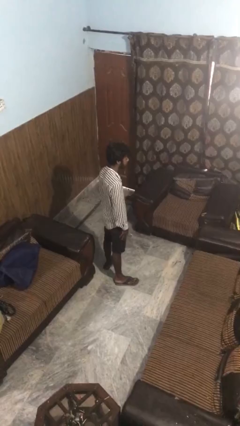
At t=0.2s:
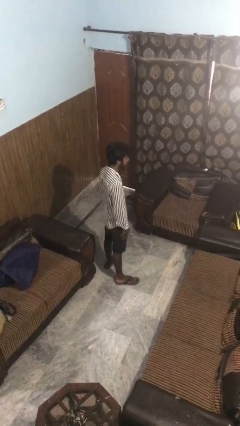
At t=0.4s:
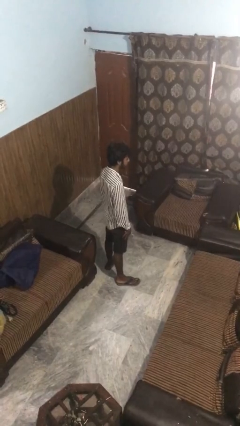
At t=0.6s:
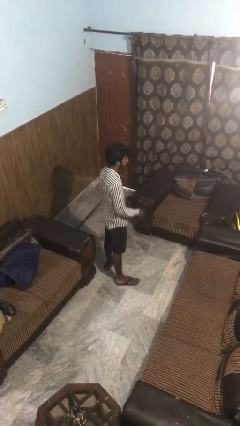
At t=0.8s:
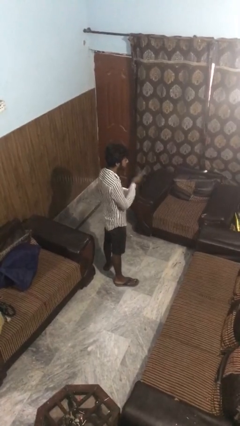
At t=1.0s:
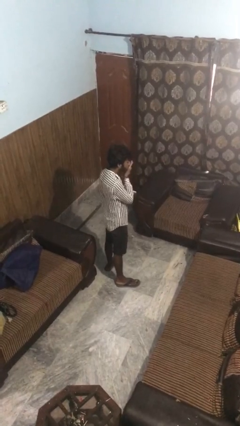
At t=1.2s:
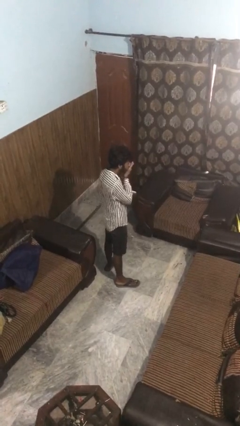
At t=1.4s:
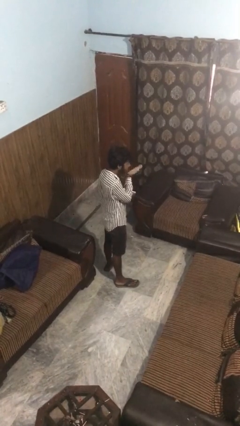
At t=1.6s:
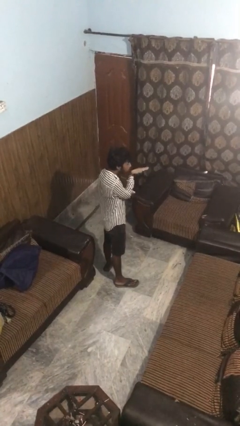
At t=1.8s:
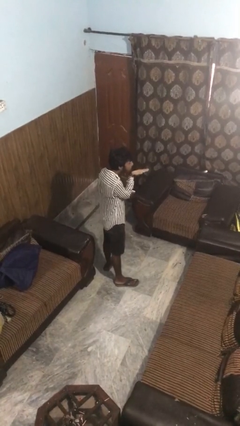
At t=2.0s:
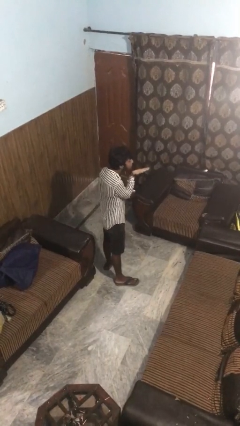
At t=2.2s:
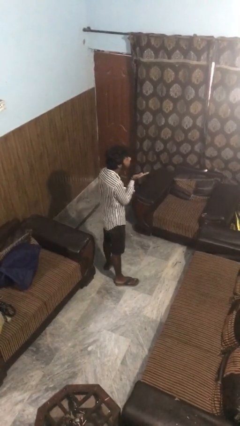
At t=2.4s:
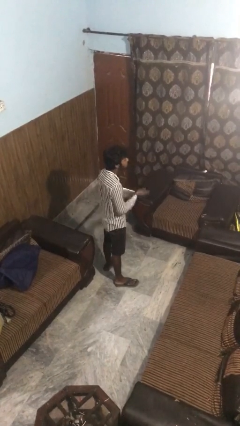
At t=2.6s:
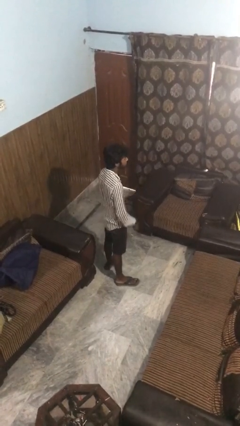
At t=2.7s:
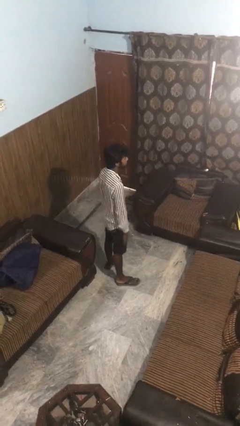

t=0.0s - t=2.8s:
person gestures blow kiss

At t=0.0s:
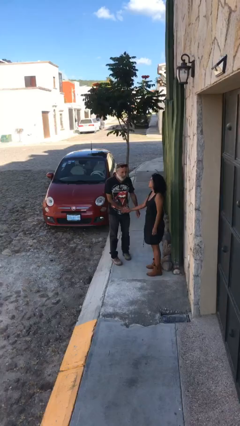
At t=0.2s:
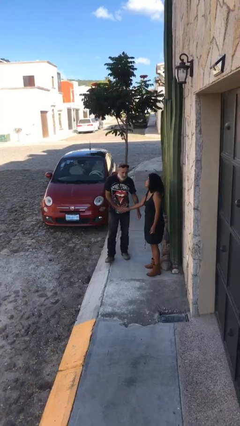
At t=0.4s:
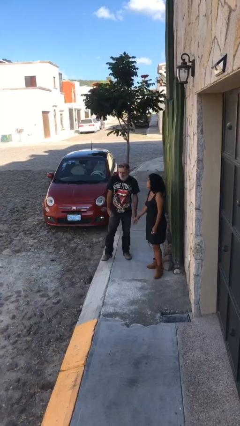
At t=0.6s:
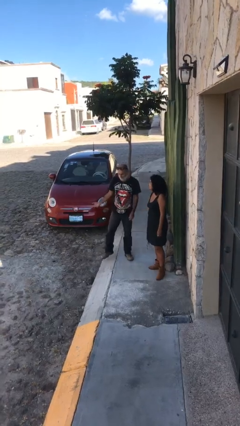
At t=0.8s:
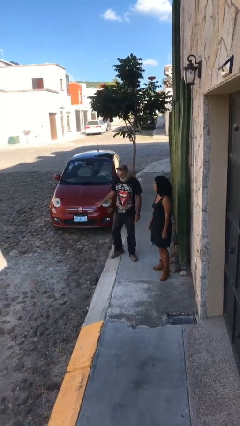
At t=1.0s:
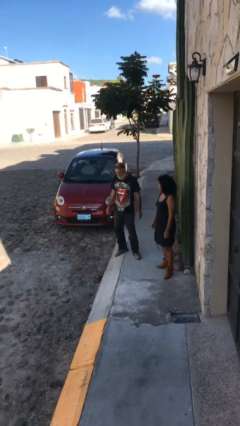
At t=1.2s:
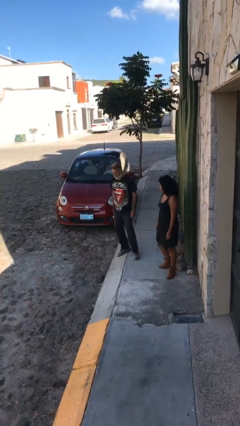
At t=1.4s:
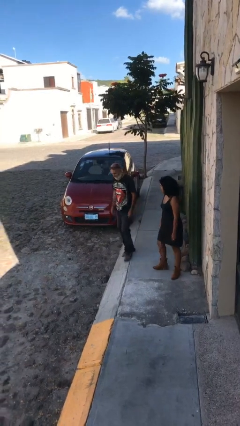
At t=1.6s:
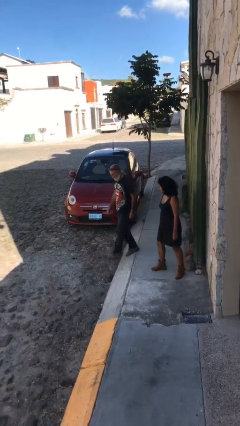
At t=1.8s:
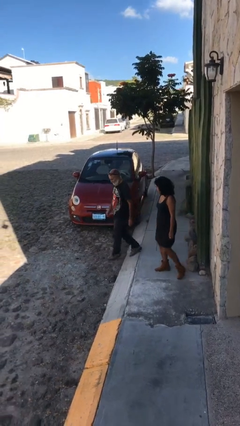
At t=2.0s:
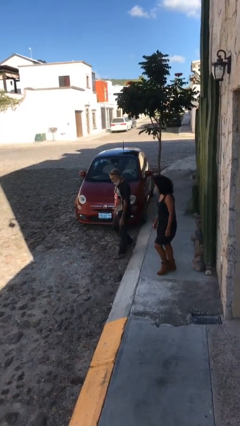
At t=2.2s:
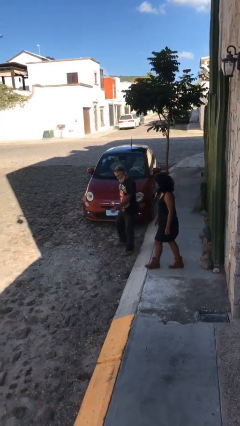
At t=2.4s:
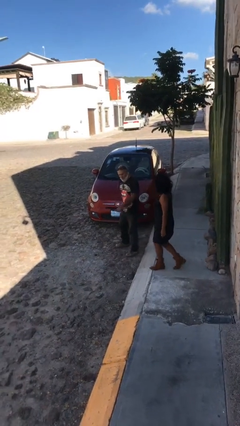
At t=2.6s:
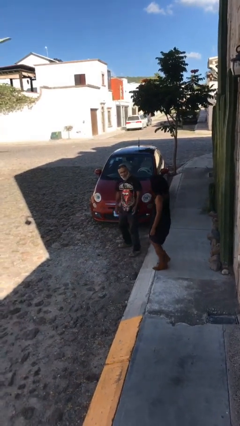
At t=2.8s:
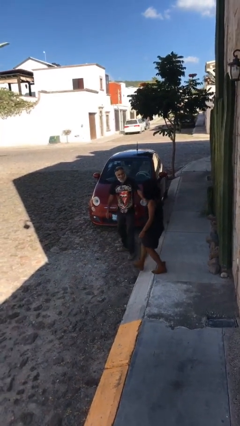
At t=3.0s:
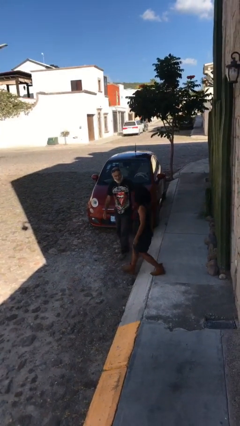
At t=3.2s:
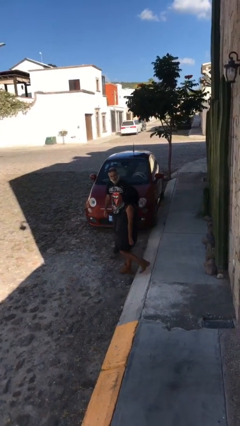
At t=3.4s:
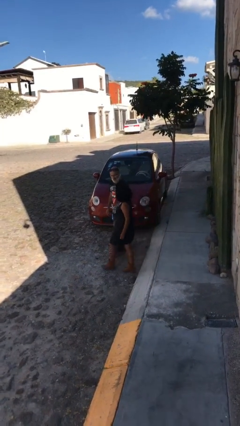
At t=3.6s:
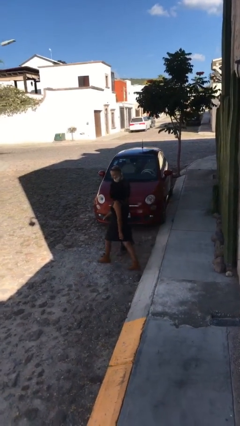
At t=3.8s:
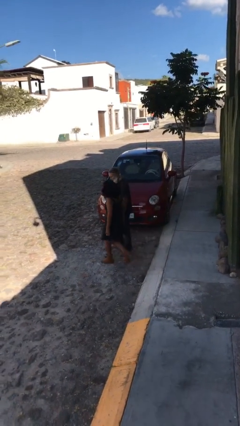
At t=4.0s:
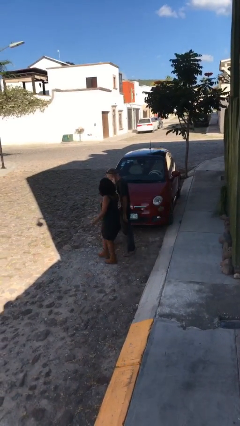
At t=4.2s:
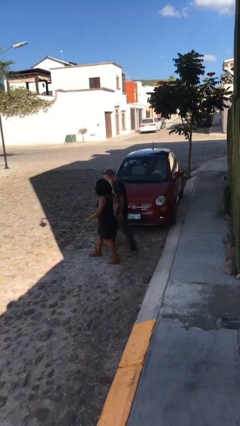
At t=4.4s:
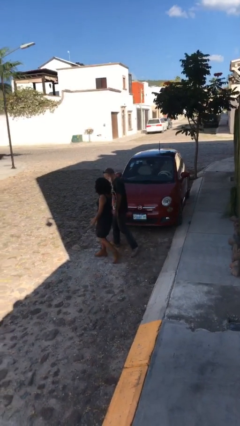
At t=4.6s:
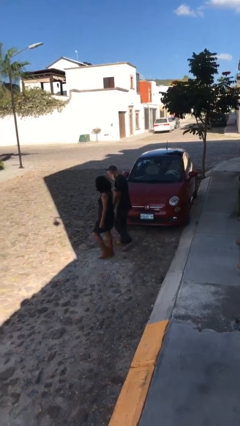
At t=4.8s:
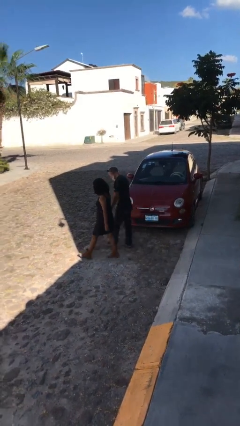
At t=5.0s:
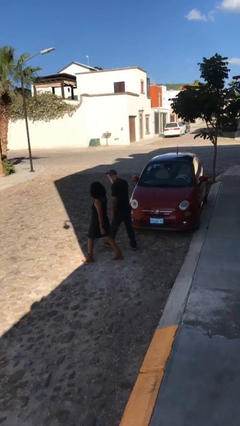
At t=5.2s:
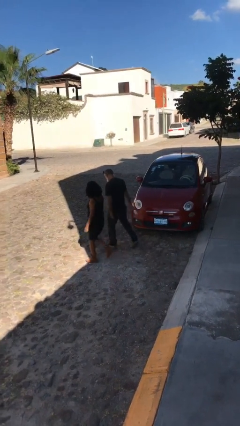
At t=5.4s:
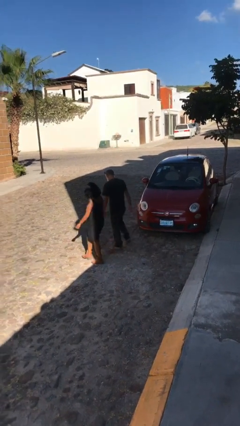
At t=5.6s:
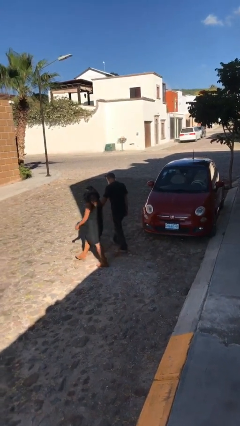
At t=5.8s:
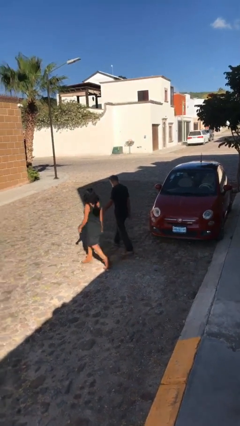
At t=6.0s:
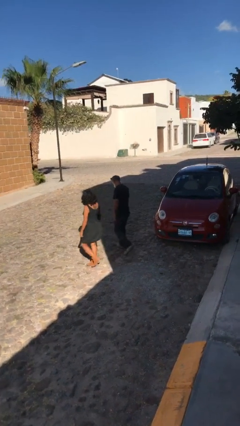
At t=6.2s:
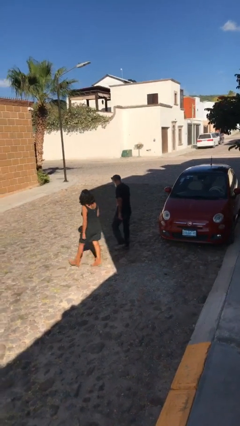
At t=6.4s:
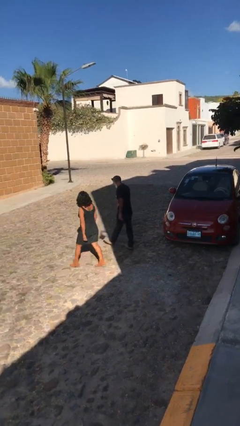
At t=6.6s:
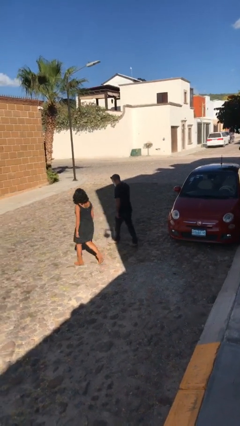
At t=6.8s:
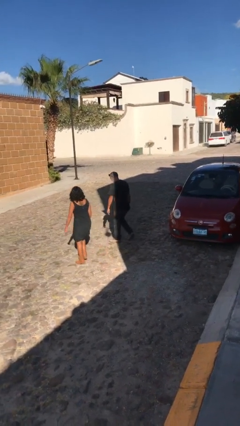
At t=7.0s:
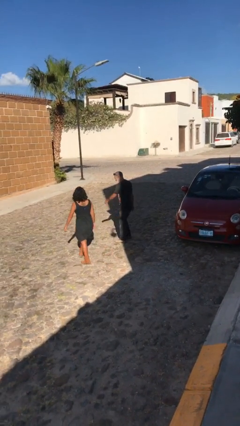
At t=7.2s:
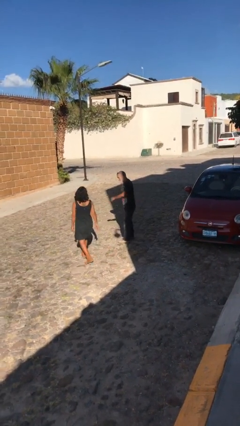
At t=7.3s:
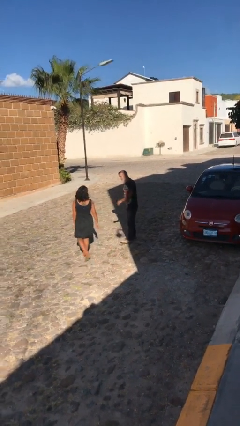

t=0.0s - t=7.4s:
person talks to person

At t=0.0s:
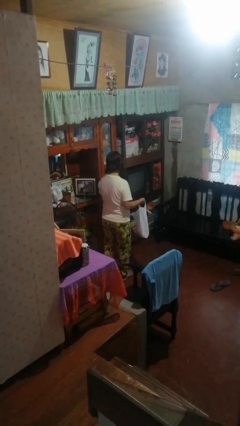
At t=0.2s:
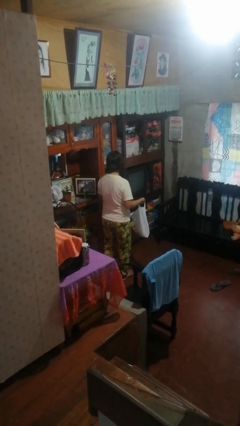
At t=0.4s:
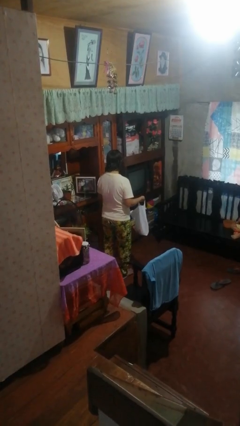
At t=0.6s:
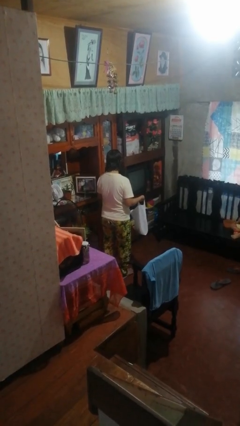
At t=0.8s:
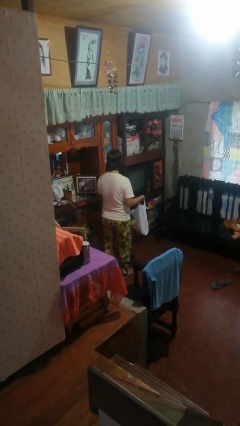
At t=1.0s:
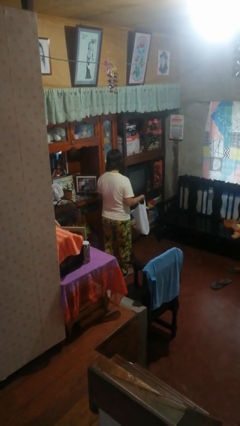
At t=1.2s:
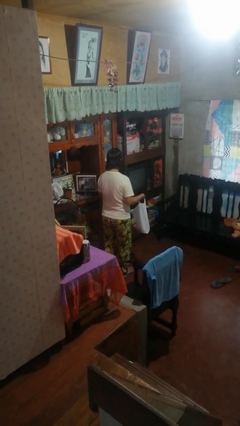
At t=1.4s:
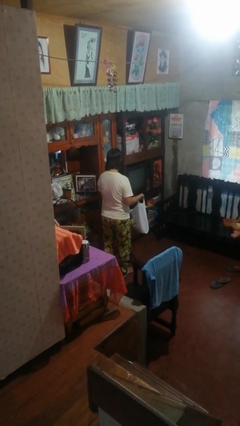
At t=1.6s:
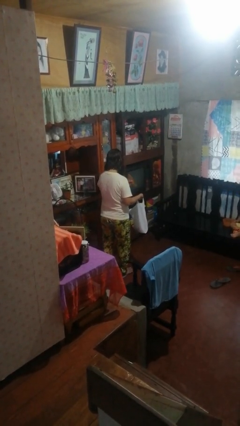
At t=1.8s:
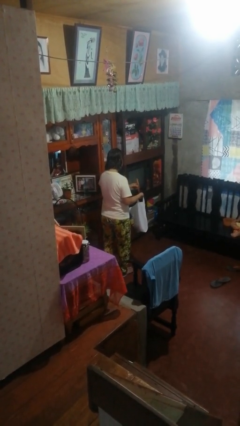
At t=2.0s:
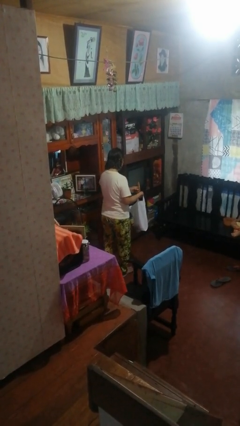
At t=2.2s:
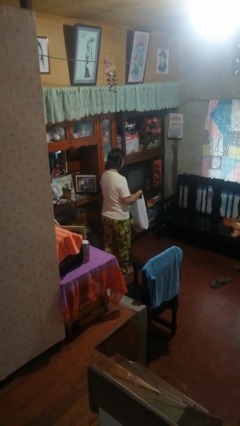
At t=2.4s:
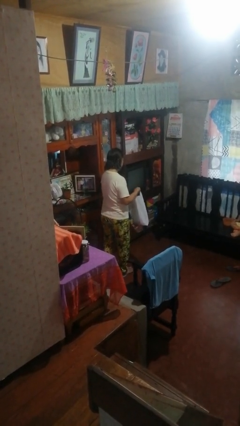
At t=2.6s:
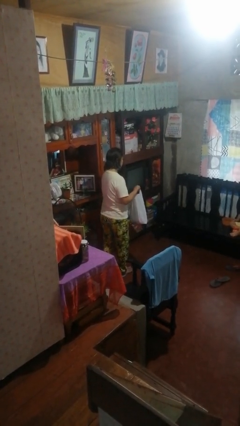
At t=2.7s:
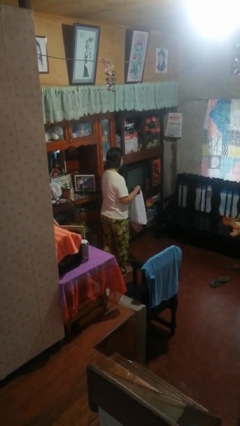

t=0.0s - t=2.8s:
person puts object into bag

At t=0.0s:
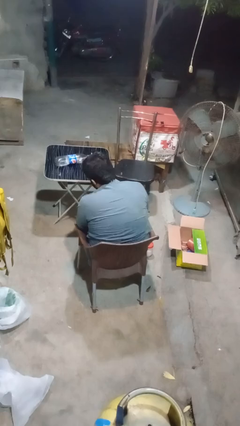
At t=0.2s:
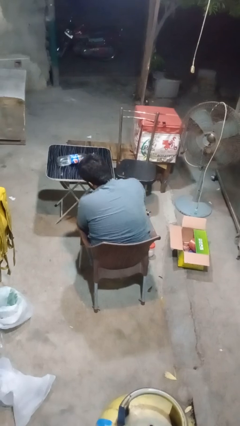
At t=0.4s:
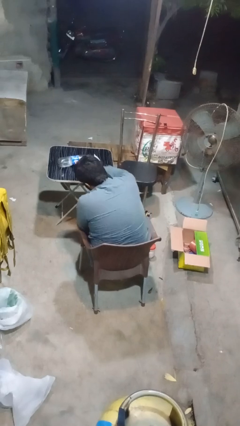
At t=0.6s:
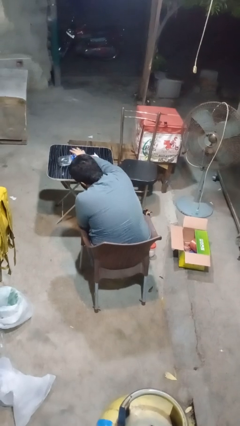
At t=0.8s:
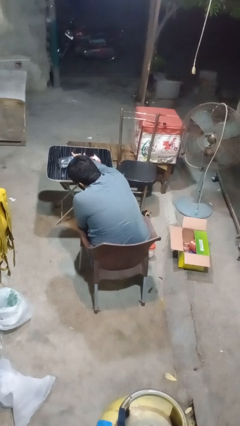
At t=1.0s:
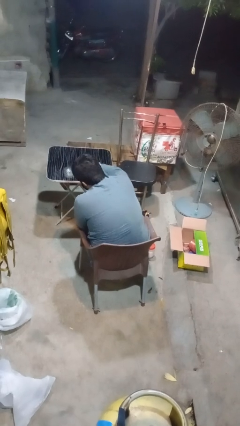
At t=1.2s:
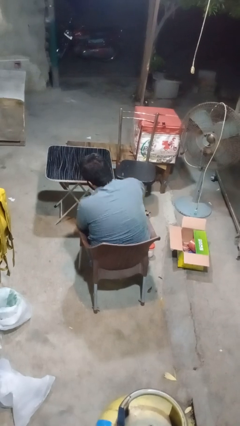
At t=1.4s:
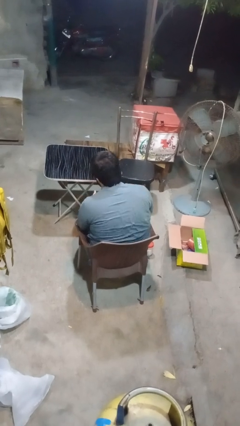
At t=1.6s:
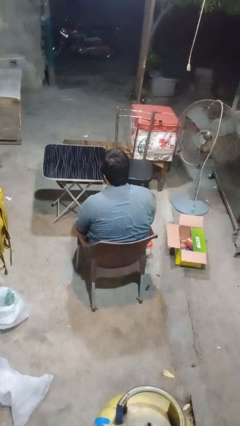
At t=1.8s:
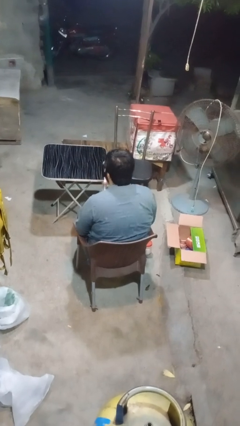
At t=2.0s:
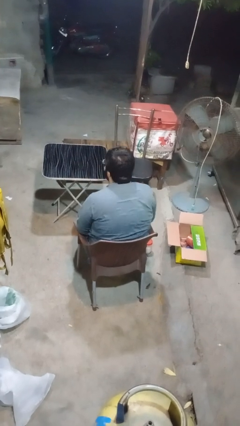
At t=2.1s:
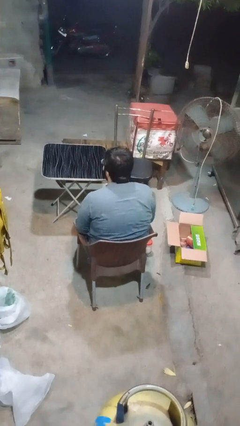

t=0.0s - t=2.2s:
person picks up object from table

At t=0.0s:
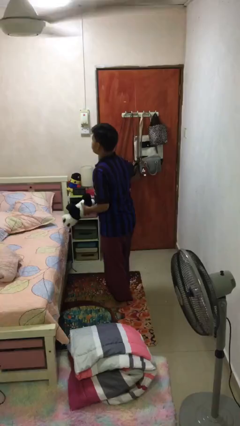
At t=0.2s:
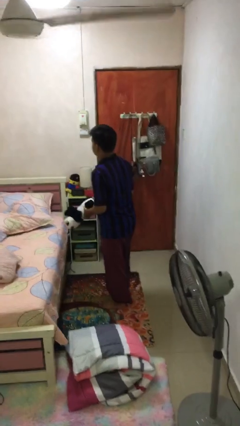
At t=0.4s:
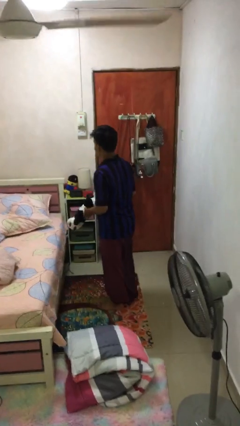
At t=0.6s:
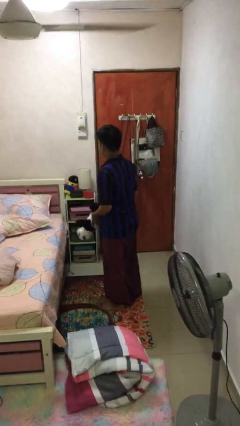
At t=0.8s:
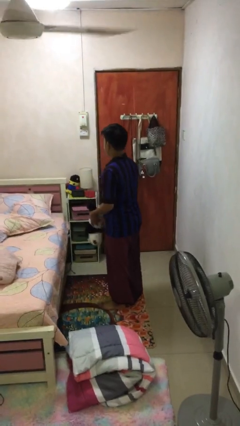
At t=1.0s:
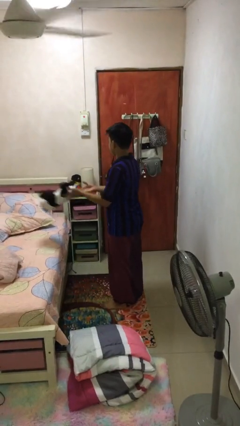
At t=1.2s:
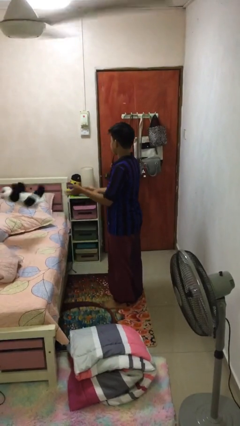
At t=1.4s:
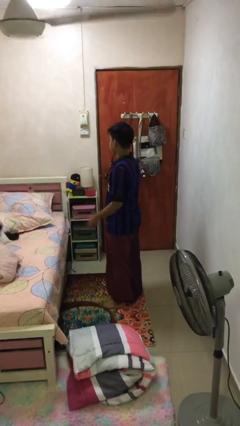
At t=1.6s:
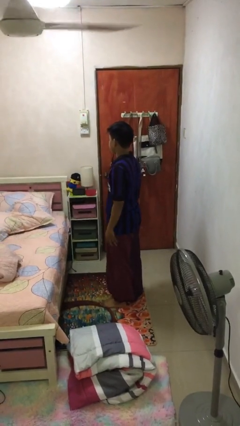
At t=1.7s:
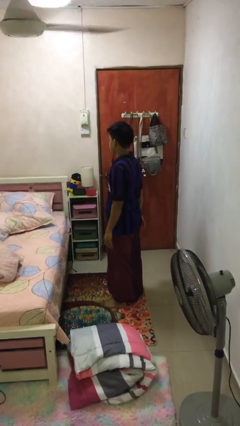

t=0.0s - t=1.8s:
person throws object on bed

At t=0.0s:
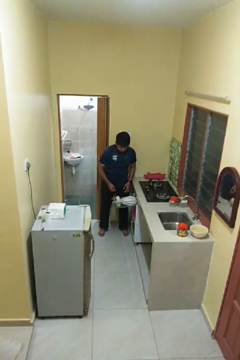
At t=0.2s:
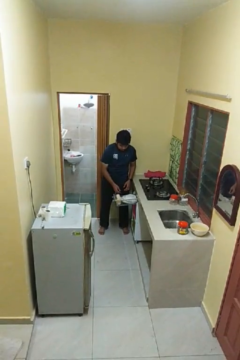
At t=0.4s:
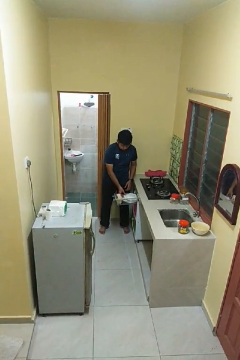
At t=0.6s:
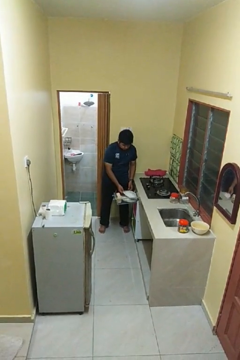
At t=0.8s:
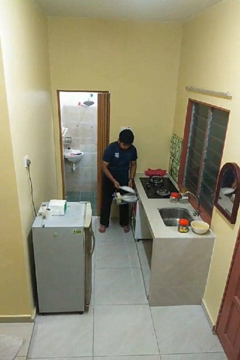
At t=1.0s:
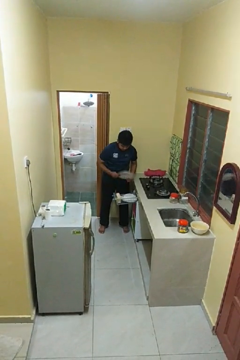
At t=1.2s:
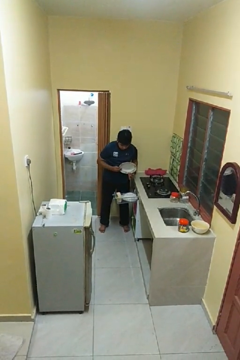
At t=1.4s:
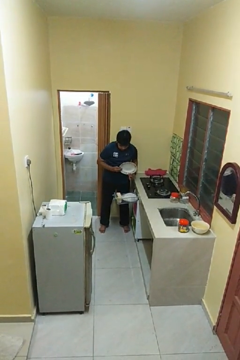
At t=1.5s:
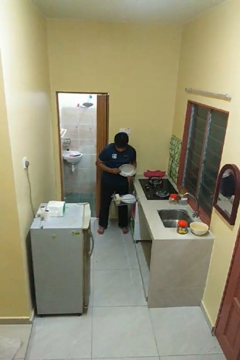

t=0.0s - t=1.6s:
person takes object from kitchen drawer
